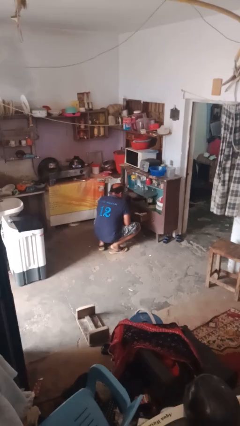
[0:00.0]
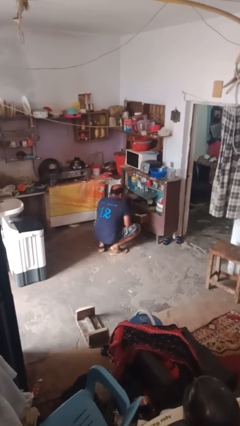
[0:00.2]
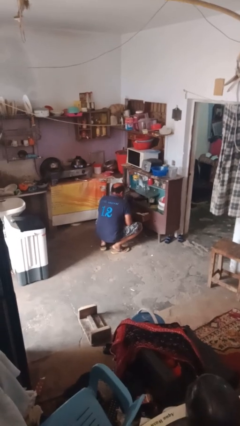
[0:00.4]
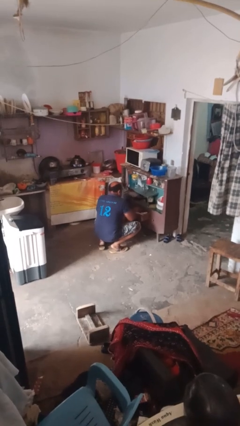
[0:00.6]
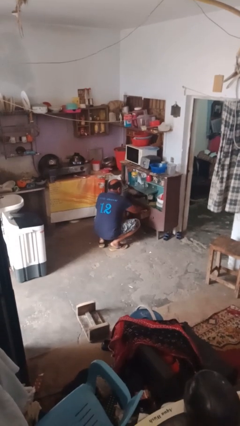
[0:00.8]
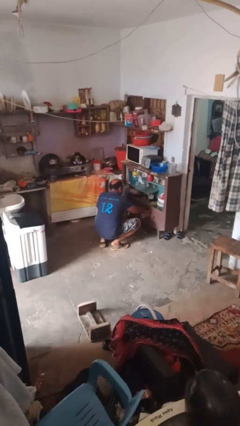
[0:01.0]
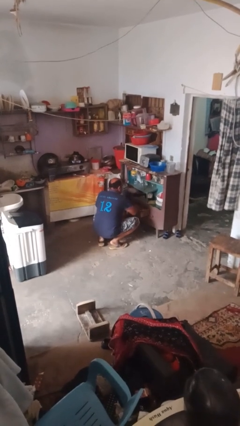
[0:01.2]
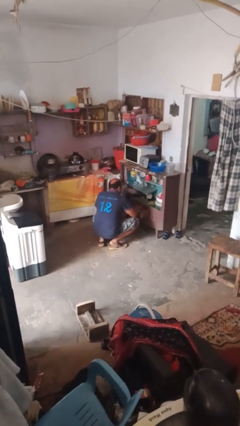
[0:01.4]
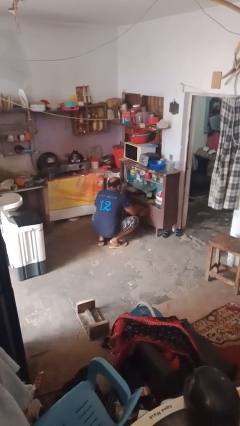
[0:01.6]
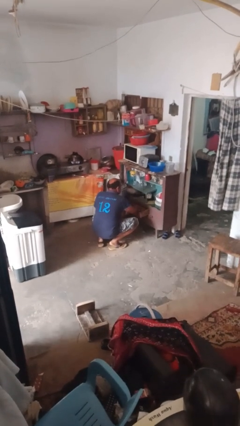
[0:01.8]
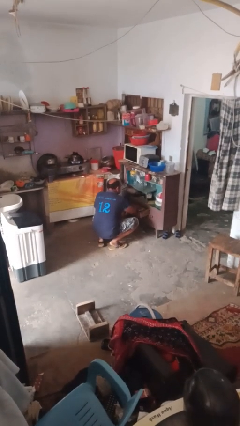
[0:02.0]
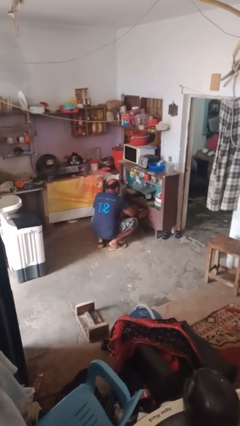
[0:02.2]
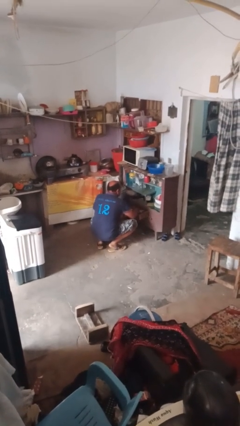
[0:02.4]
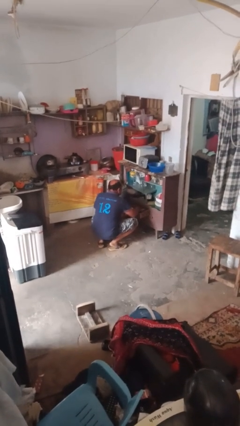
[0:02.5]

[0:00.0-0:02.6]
person searches in kitchen drawer

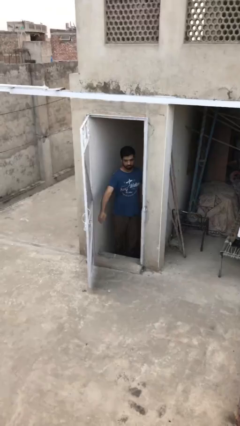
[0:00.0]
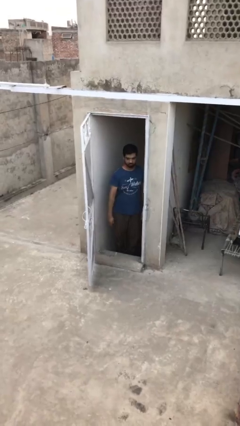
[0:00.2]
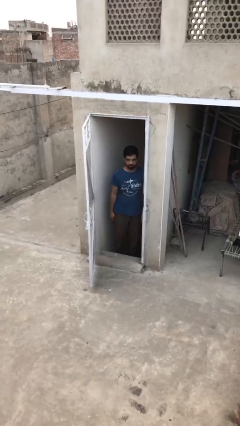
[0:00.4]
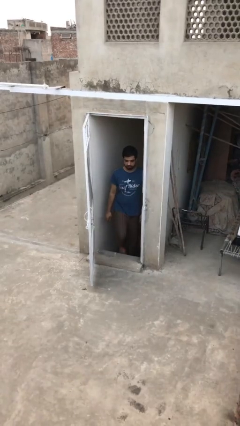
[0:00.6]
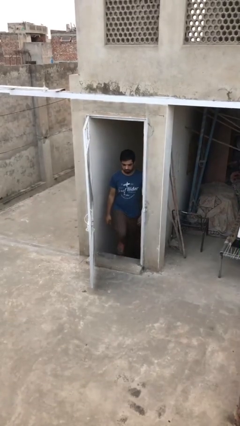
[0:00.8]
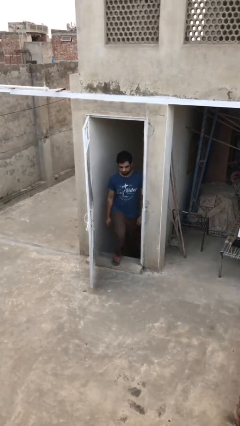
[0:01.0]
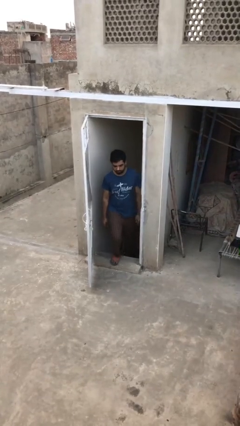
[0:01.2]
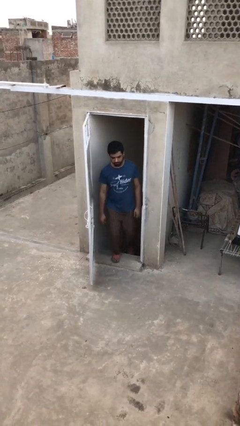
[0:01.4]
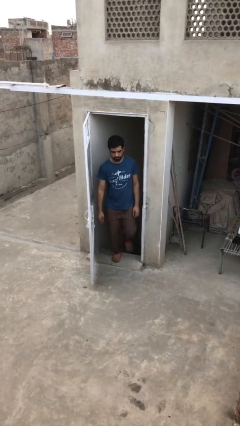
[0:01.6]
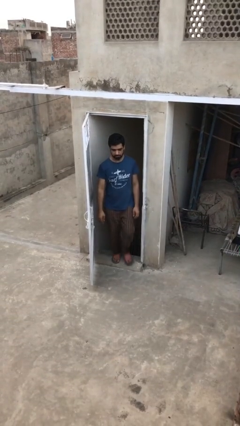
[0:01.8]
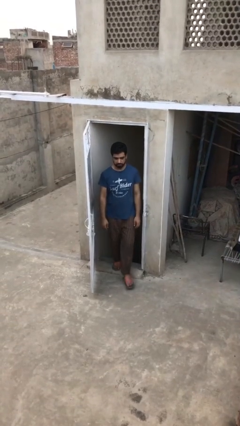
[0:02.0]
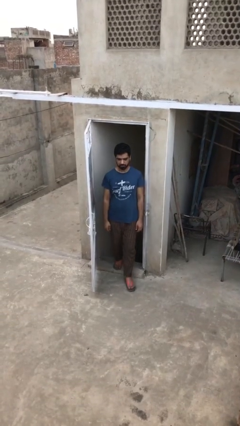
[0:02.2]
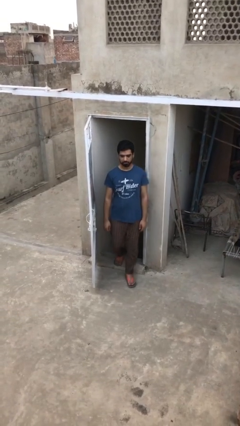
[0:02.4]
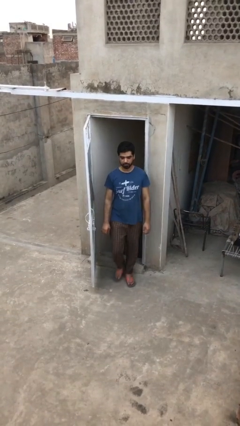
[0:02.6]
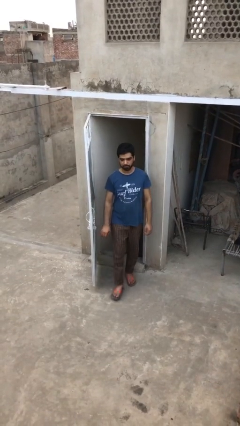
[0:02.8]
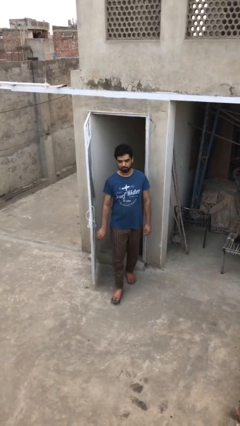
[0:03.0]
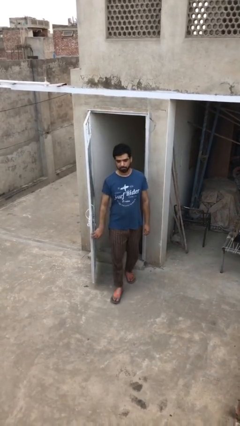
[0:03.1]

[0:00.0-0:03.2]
person enters scene through structure

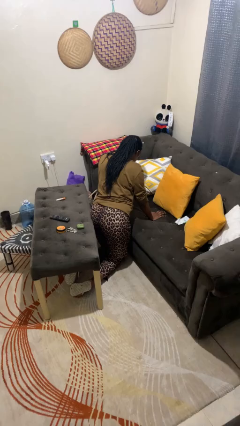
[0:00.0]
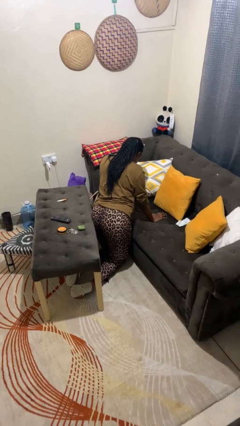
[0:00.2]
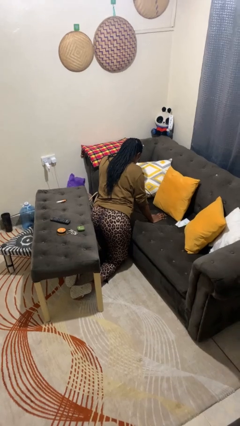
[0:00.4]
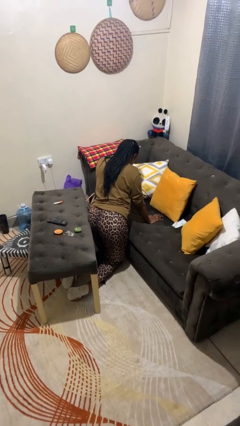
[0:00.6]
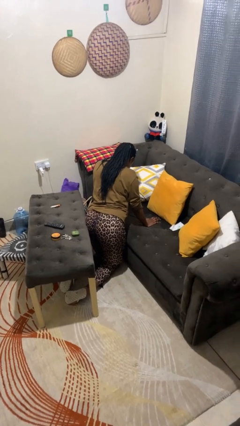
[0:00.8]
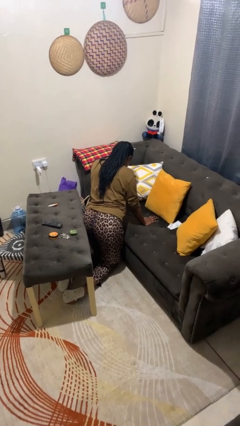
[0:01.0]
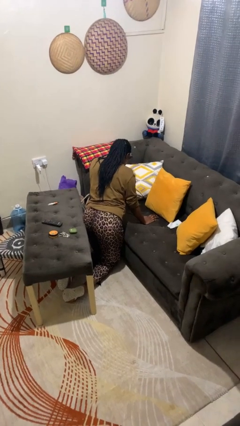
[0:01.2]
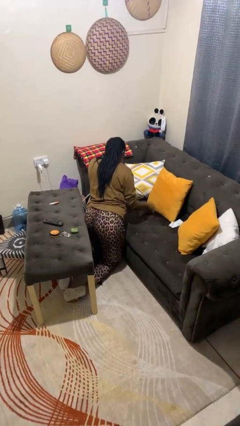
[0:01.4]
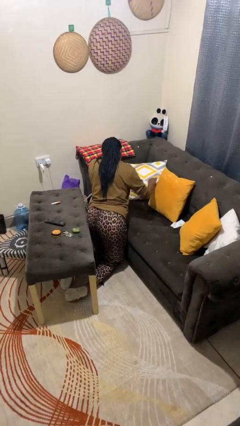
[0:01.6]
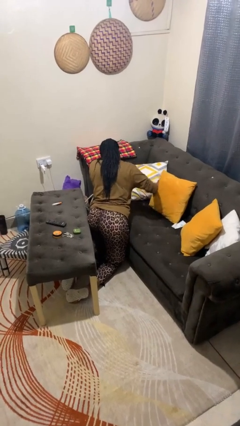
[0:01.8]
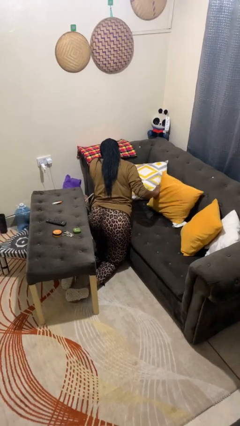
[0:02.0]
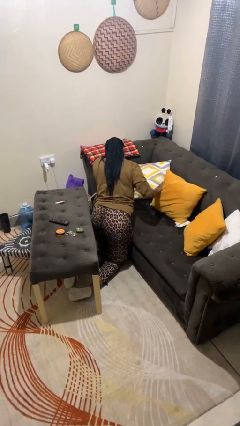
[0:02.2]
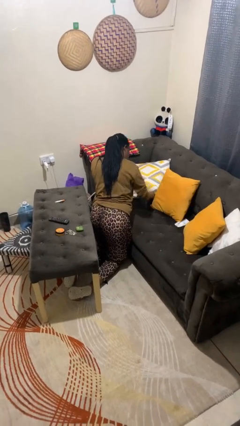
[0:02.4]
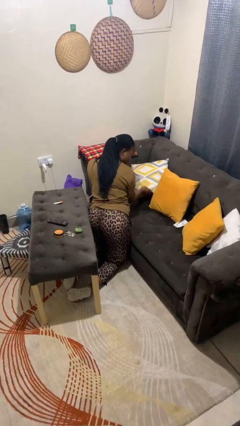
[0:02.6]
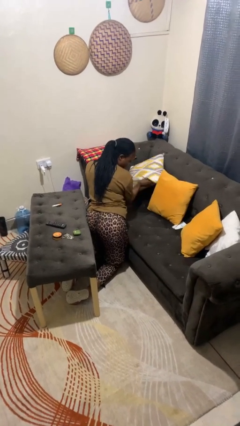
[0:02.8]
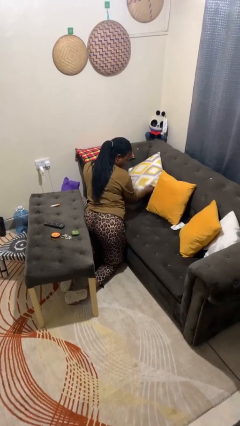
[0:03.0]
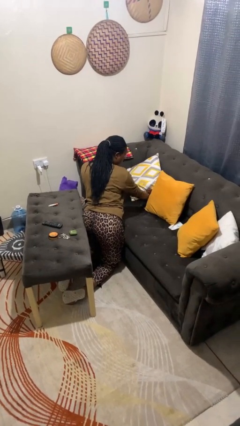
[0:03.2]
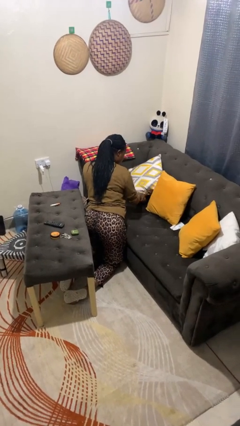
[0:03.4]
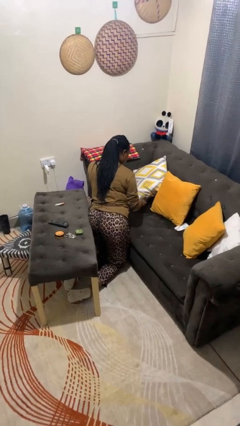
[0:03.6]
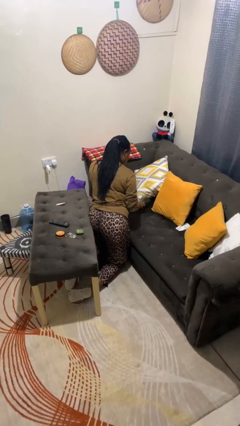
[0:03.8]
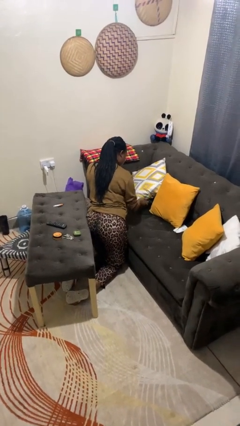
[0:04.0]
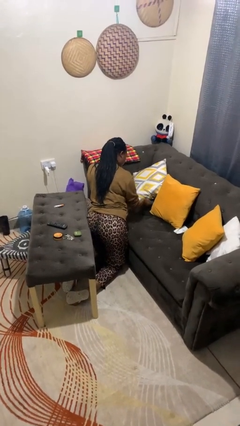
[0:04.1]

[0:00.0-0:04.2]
person searches in couch

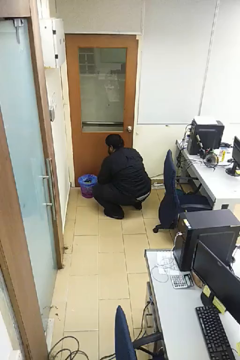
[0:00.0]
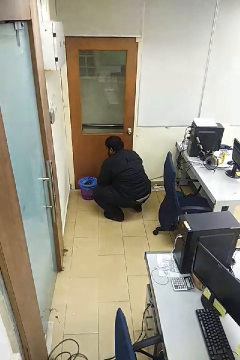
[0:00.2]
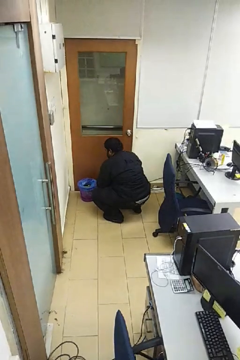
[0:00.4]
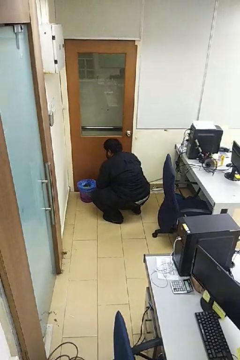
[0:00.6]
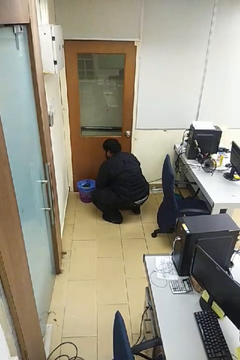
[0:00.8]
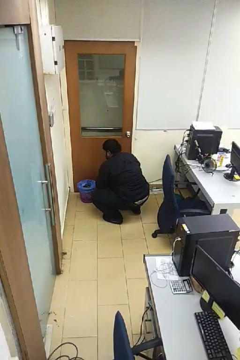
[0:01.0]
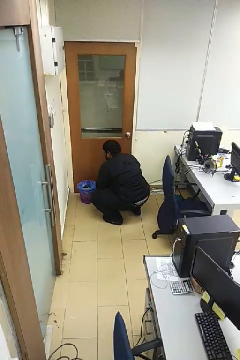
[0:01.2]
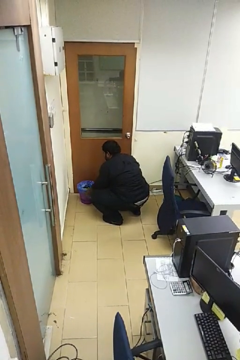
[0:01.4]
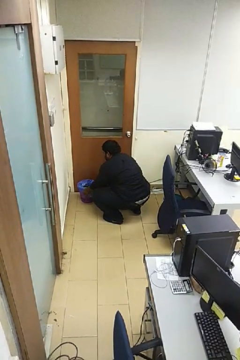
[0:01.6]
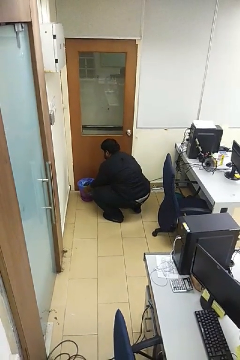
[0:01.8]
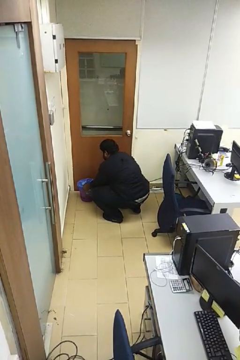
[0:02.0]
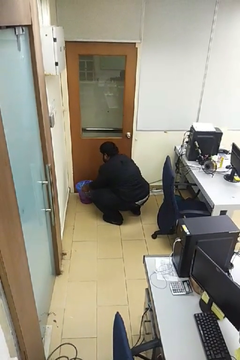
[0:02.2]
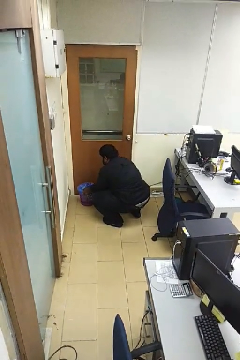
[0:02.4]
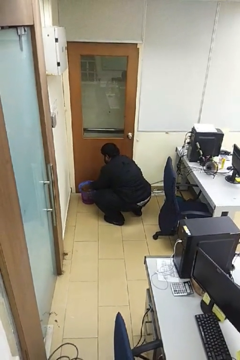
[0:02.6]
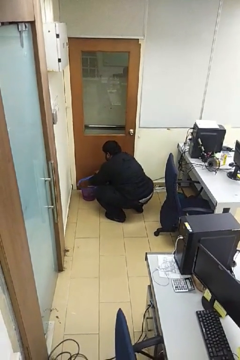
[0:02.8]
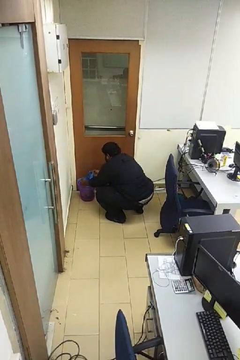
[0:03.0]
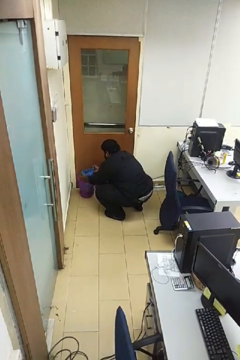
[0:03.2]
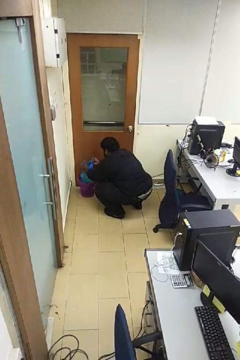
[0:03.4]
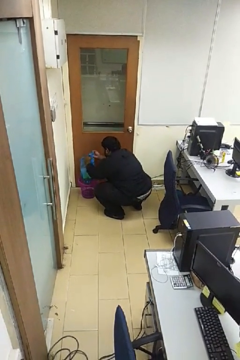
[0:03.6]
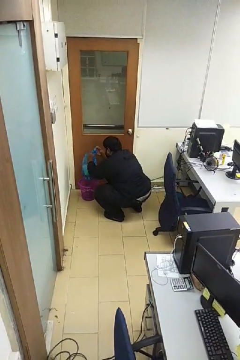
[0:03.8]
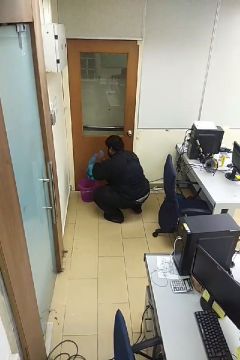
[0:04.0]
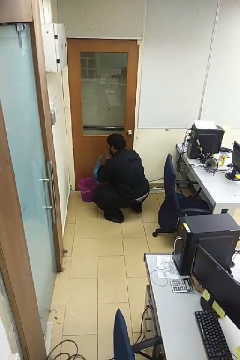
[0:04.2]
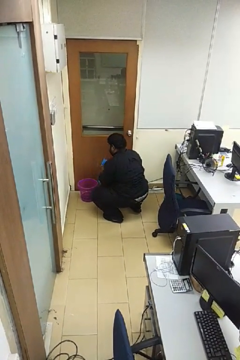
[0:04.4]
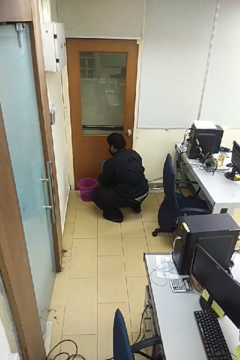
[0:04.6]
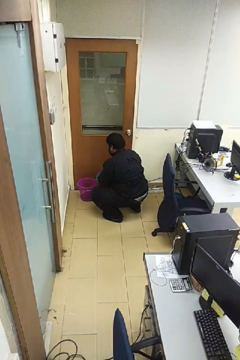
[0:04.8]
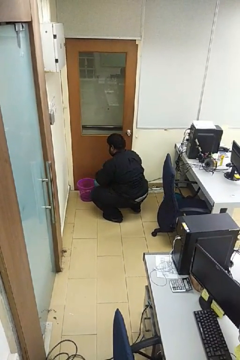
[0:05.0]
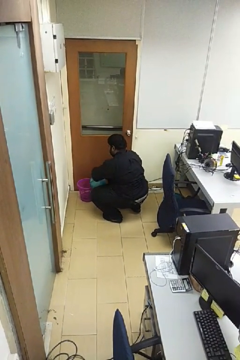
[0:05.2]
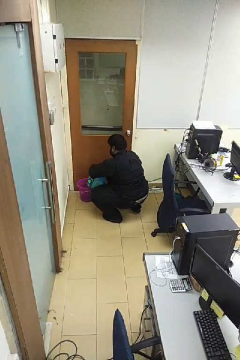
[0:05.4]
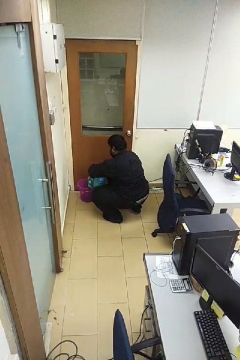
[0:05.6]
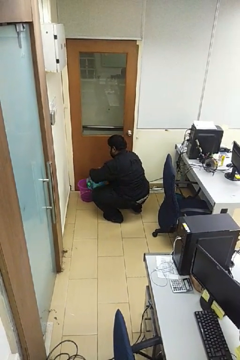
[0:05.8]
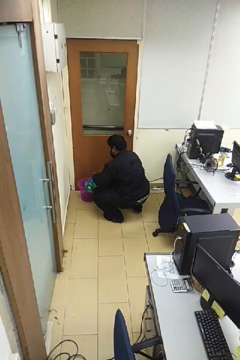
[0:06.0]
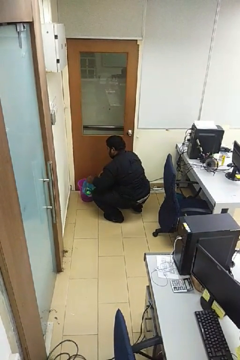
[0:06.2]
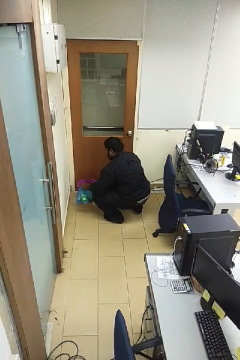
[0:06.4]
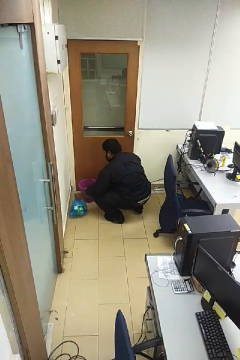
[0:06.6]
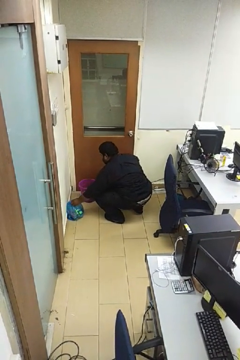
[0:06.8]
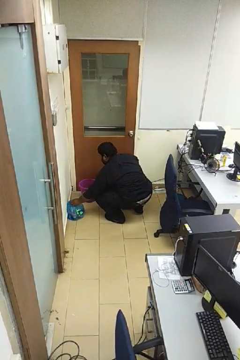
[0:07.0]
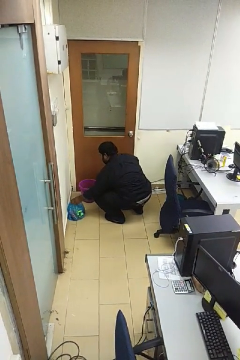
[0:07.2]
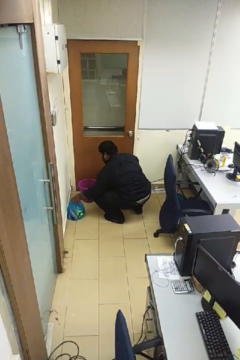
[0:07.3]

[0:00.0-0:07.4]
person removes trashbag from trashcan

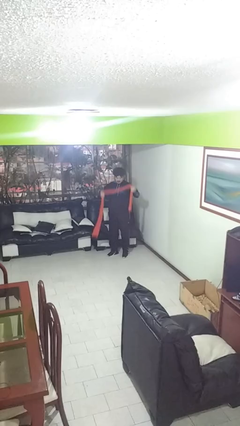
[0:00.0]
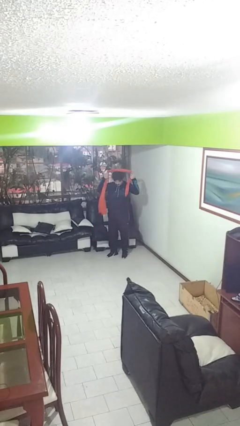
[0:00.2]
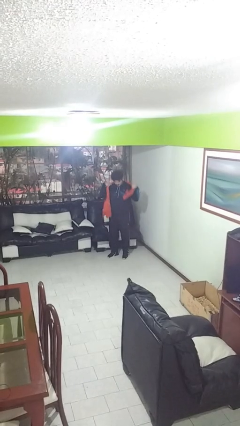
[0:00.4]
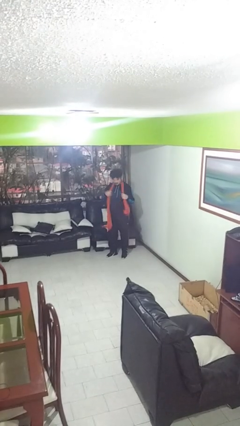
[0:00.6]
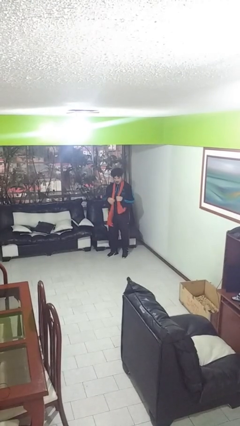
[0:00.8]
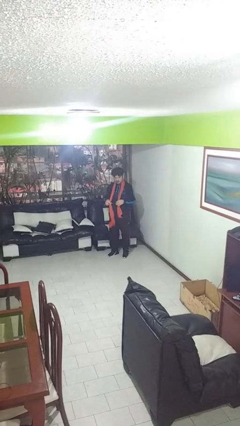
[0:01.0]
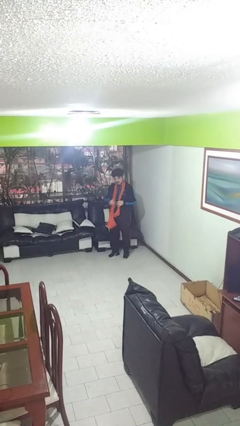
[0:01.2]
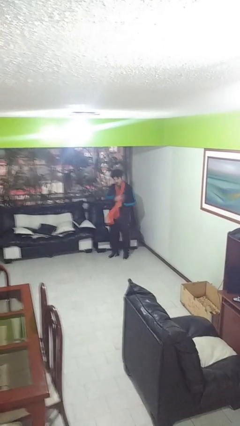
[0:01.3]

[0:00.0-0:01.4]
person puts on scarf
